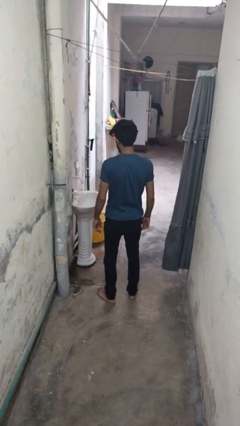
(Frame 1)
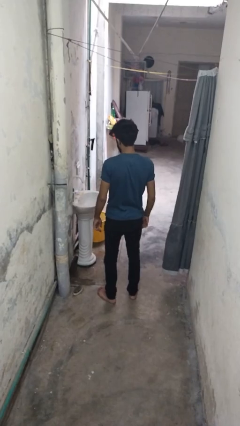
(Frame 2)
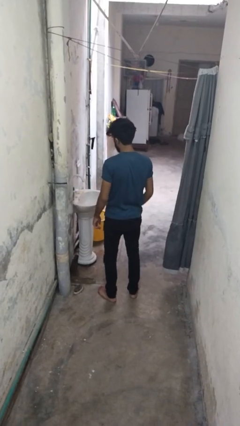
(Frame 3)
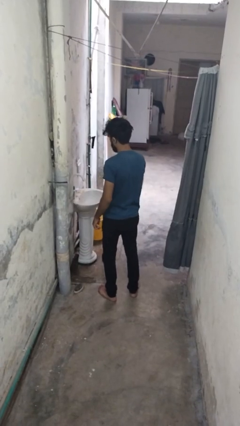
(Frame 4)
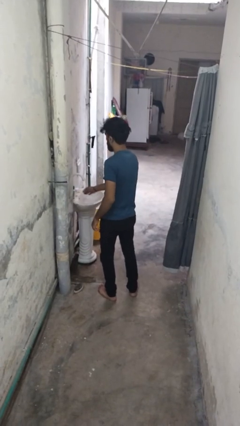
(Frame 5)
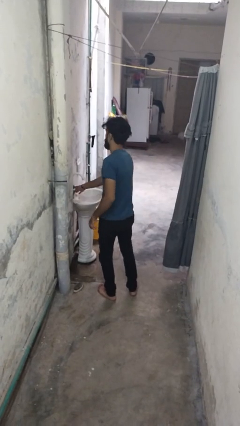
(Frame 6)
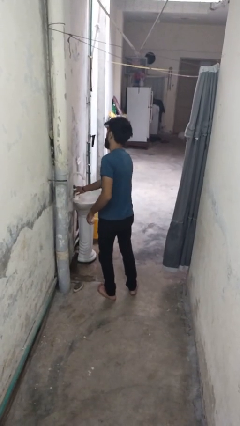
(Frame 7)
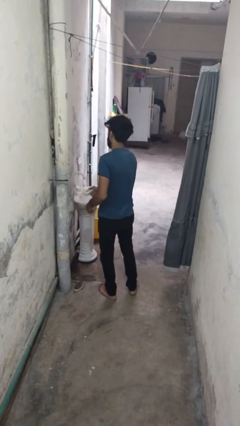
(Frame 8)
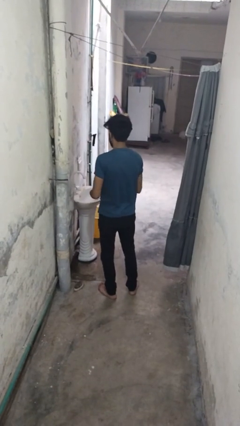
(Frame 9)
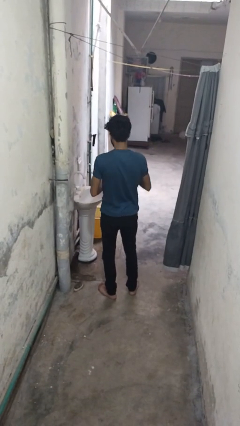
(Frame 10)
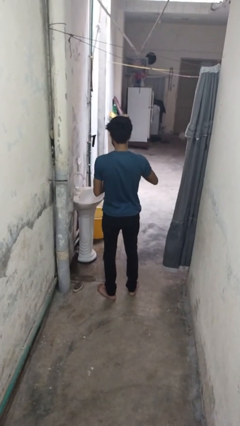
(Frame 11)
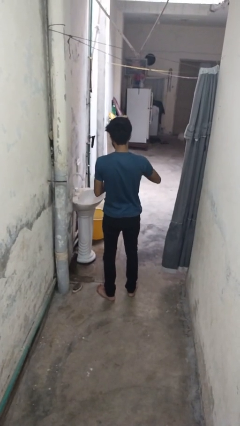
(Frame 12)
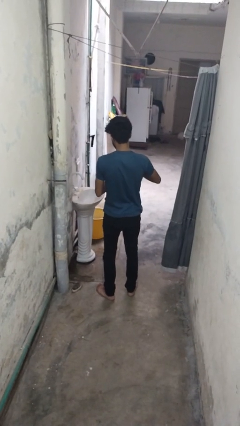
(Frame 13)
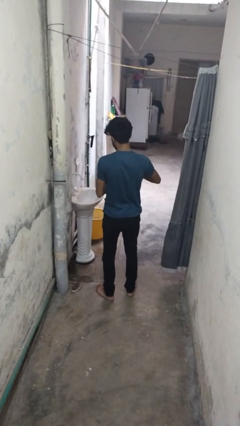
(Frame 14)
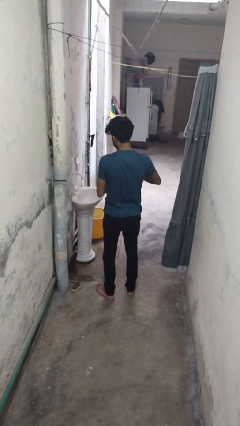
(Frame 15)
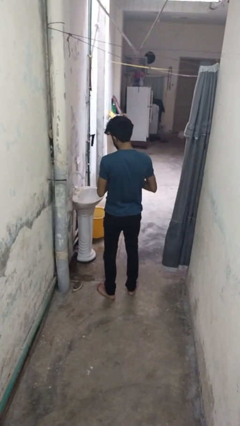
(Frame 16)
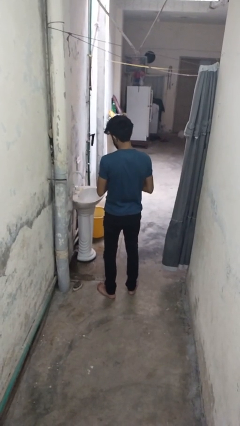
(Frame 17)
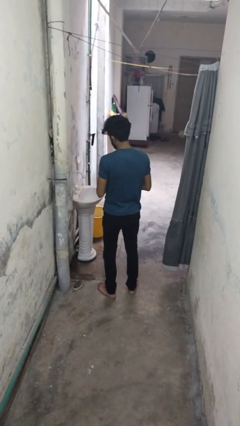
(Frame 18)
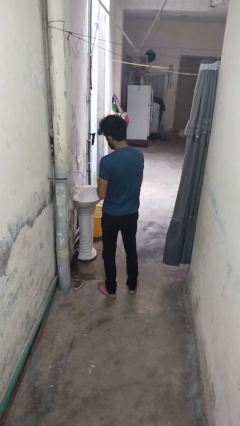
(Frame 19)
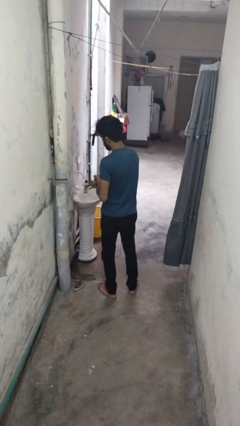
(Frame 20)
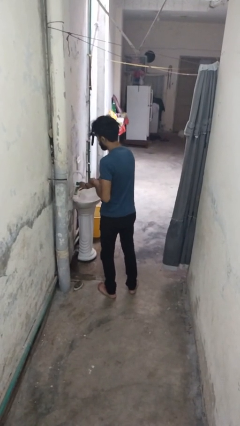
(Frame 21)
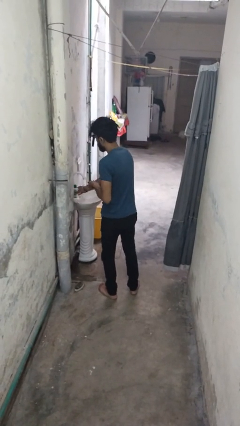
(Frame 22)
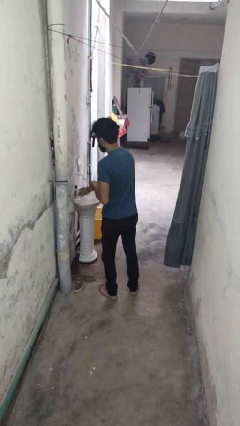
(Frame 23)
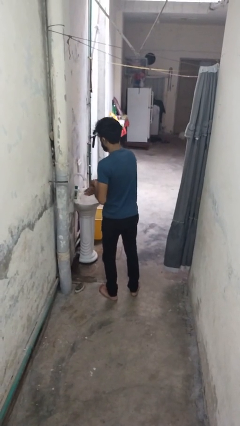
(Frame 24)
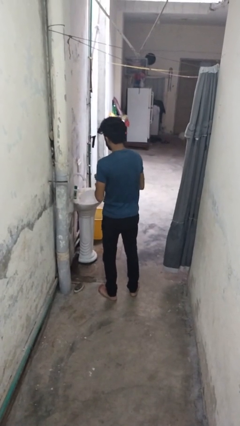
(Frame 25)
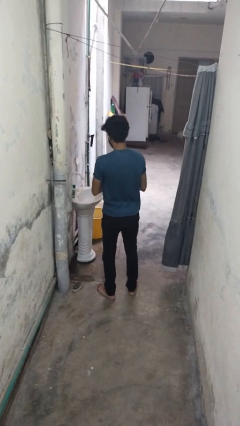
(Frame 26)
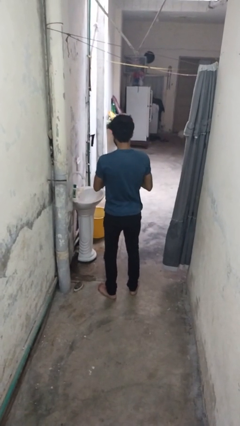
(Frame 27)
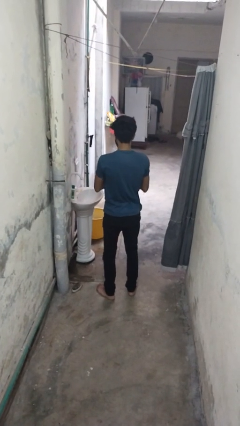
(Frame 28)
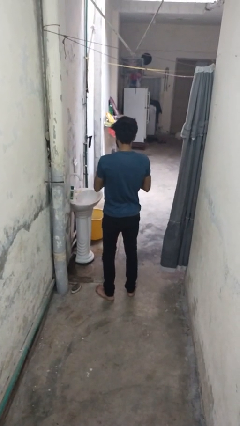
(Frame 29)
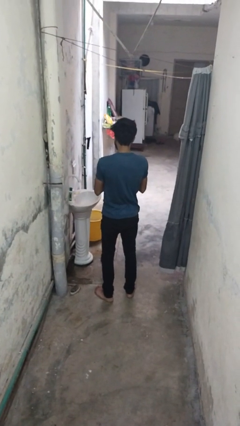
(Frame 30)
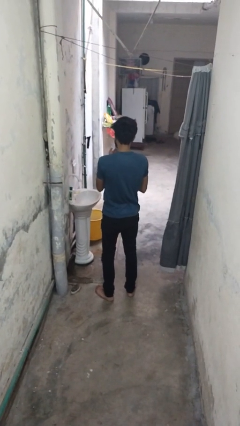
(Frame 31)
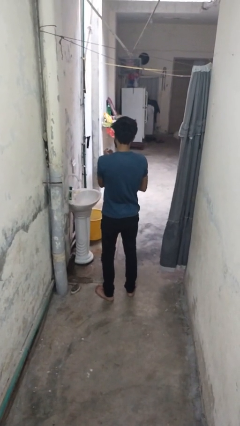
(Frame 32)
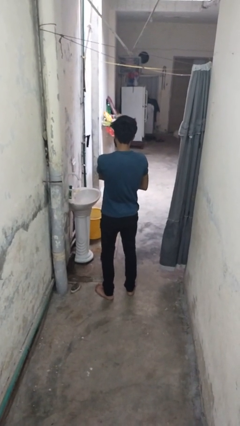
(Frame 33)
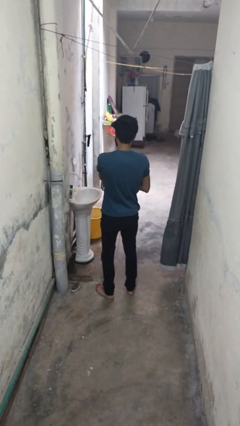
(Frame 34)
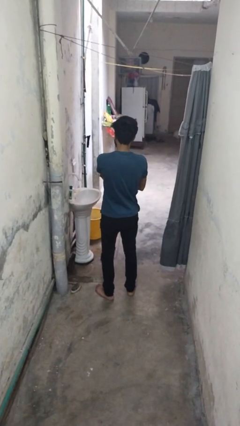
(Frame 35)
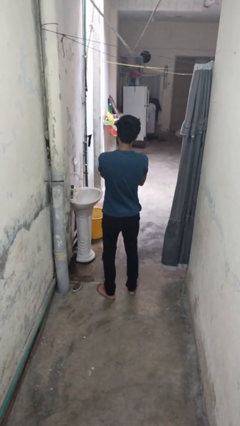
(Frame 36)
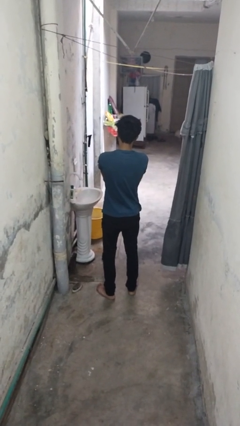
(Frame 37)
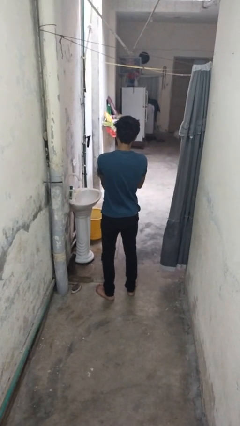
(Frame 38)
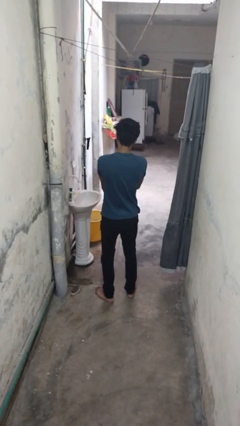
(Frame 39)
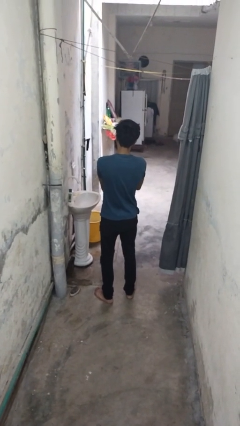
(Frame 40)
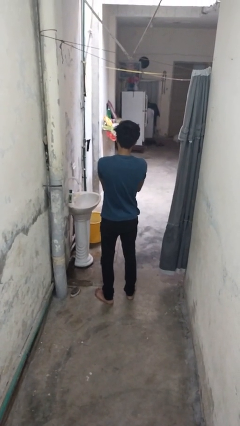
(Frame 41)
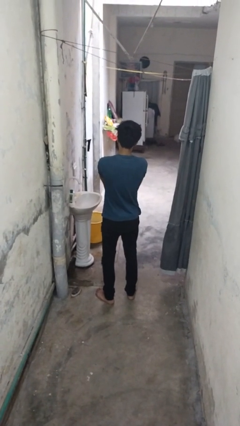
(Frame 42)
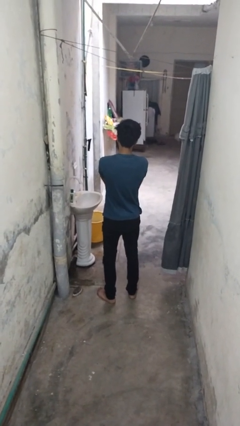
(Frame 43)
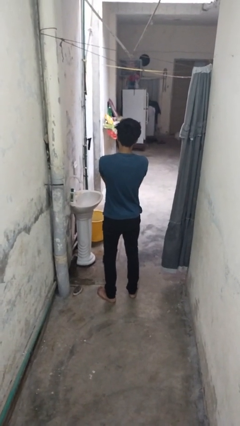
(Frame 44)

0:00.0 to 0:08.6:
person applies sunscreen

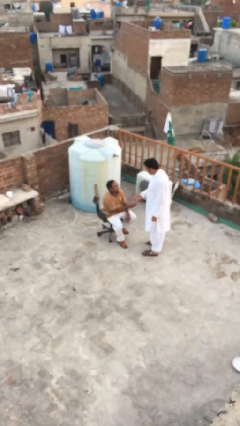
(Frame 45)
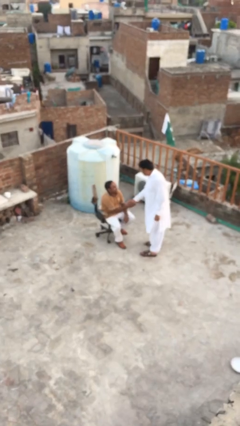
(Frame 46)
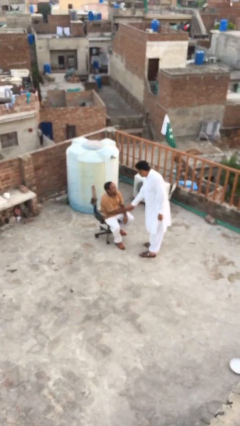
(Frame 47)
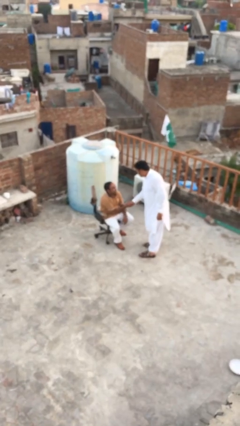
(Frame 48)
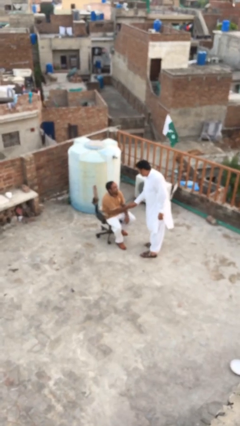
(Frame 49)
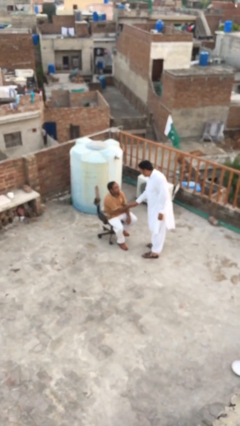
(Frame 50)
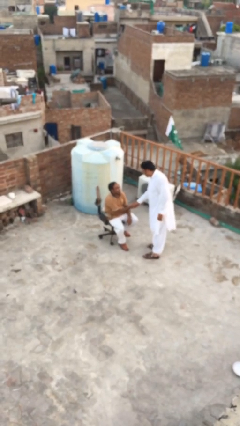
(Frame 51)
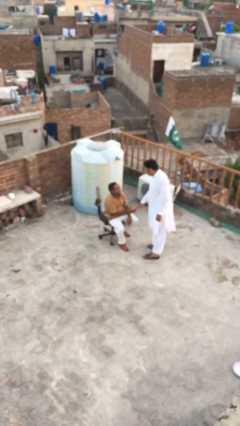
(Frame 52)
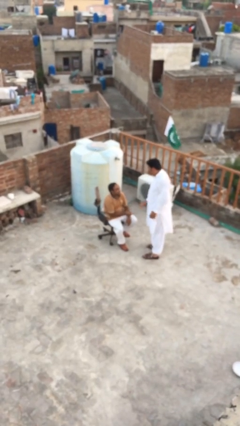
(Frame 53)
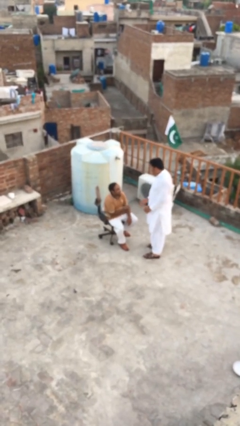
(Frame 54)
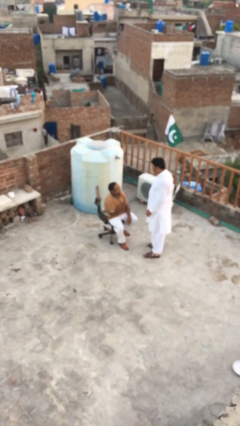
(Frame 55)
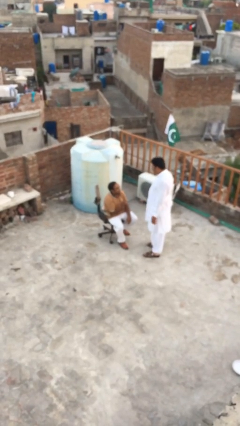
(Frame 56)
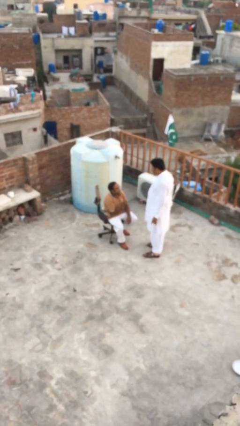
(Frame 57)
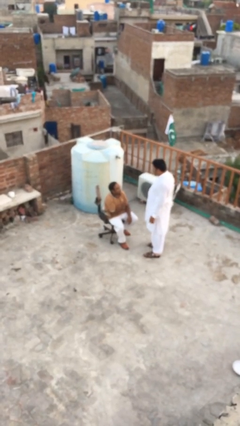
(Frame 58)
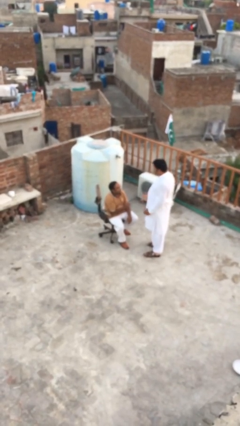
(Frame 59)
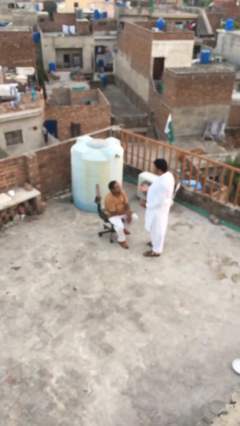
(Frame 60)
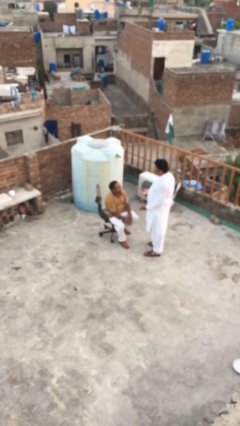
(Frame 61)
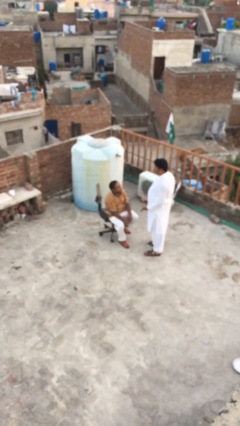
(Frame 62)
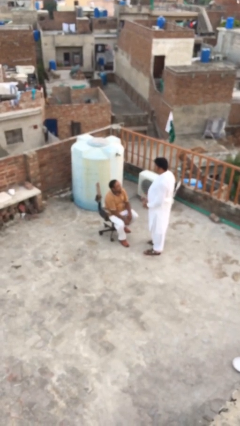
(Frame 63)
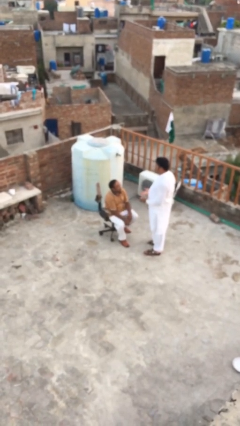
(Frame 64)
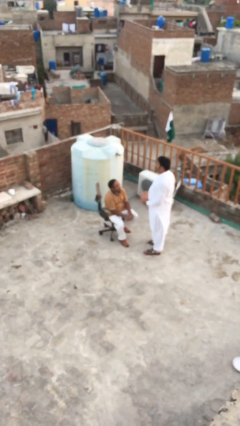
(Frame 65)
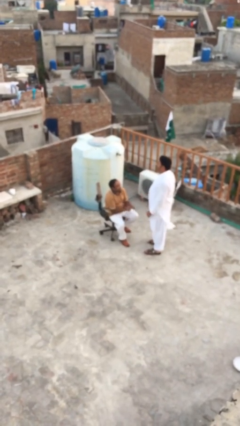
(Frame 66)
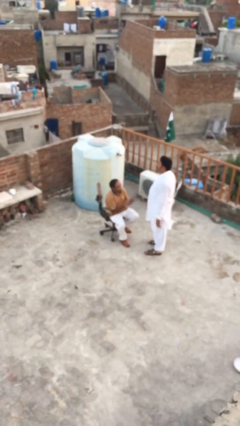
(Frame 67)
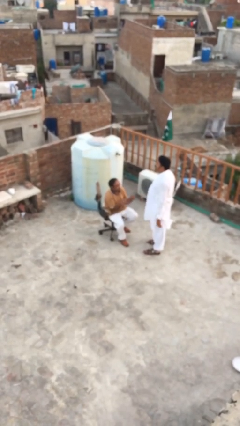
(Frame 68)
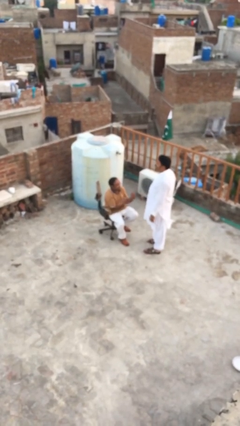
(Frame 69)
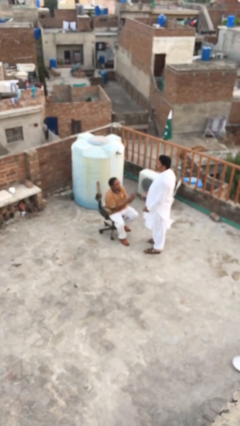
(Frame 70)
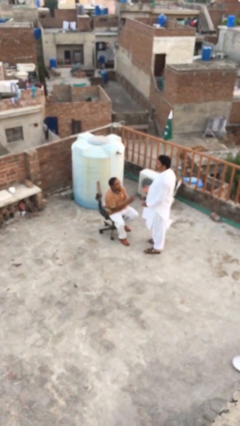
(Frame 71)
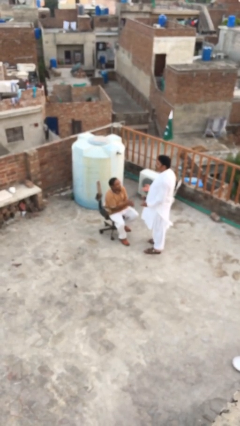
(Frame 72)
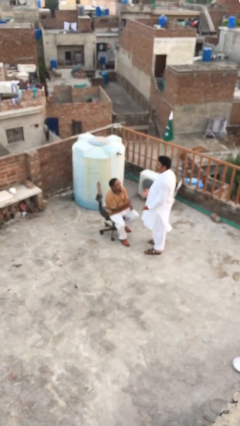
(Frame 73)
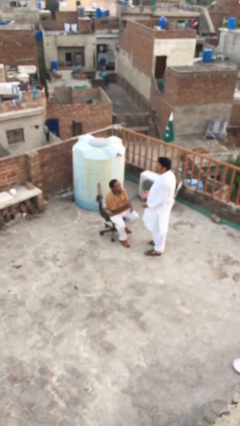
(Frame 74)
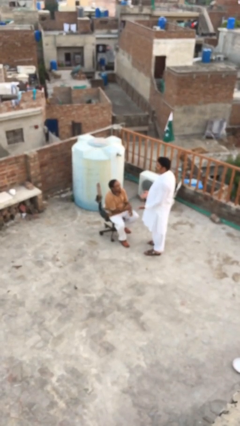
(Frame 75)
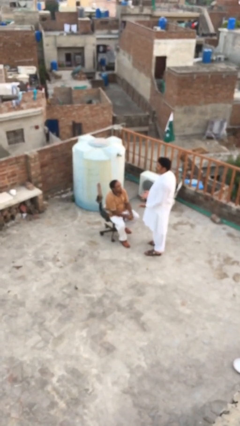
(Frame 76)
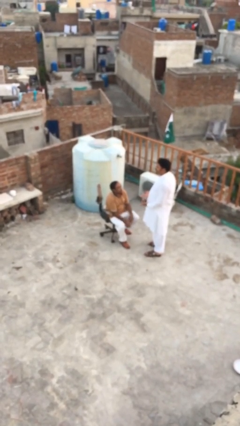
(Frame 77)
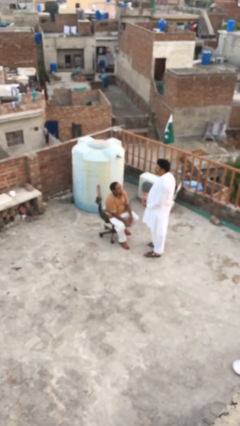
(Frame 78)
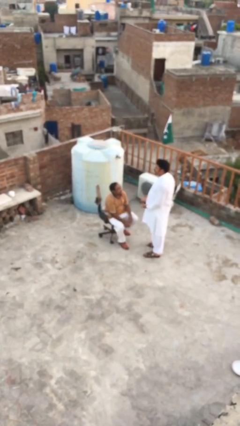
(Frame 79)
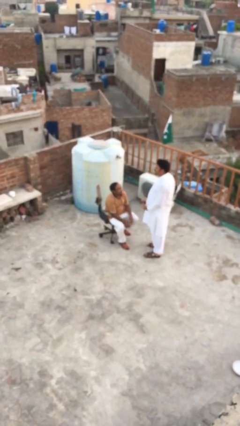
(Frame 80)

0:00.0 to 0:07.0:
person shakes hand

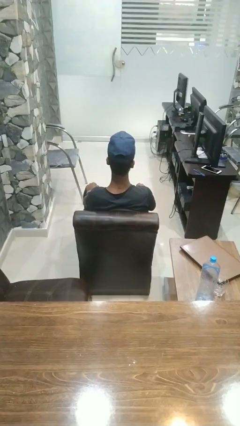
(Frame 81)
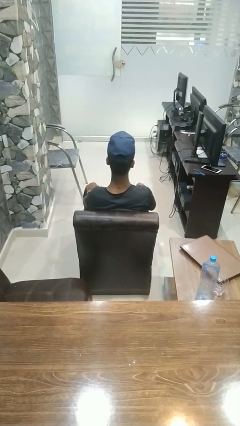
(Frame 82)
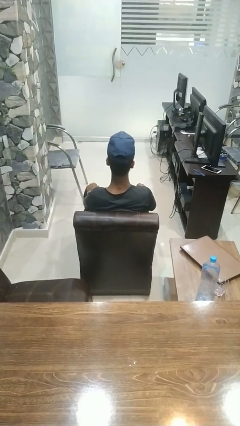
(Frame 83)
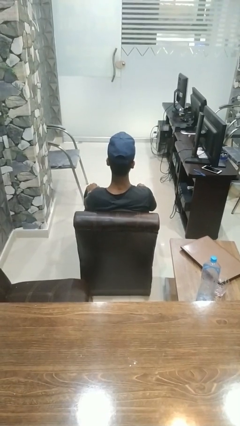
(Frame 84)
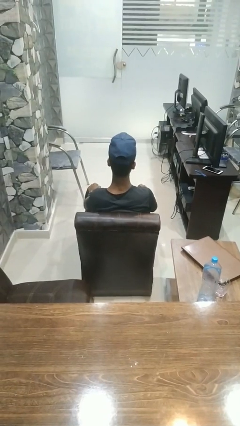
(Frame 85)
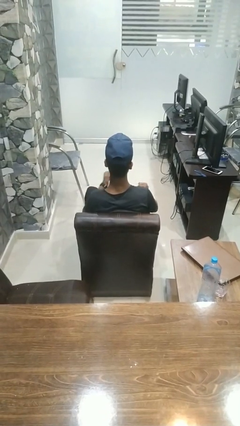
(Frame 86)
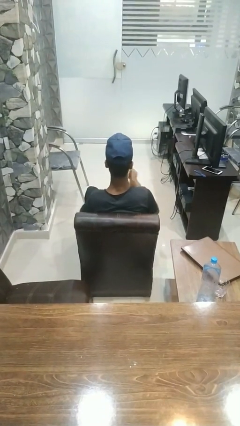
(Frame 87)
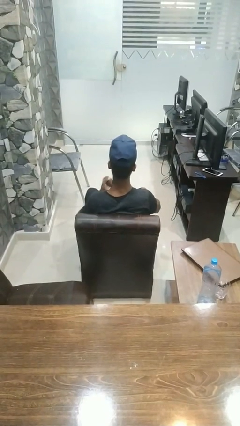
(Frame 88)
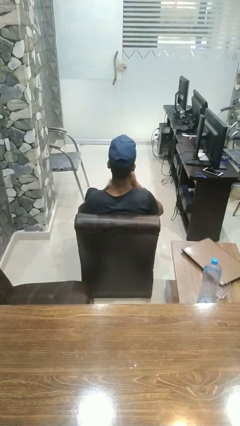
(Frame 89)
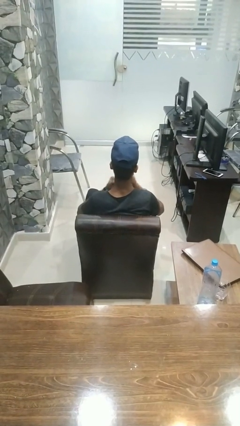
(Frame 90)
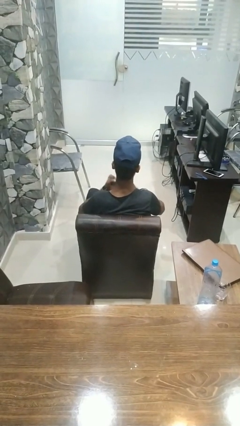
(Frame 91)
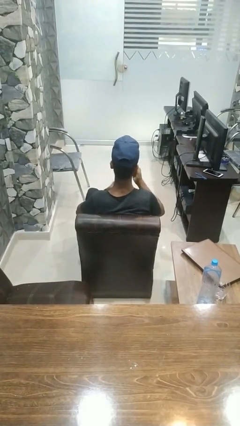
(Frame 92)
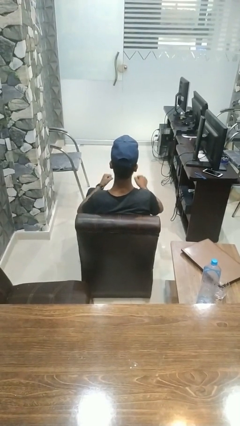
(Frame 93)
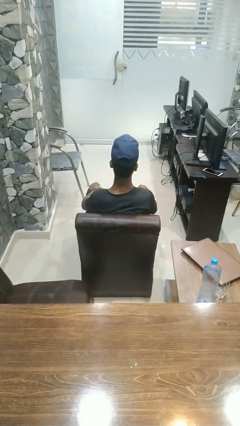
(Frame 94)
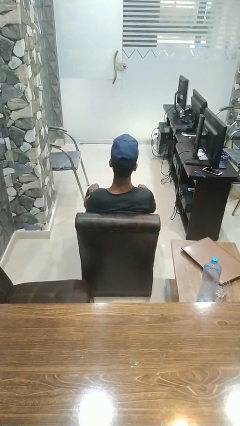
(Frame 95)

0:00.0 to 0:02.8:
person drums on chest
